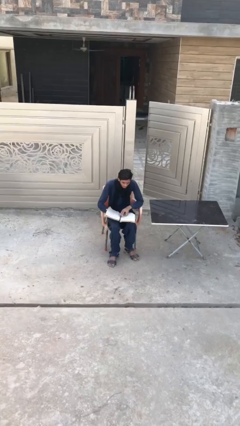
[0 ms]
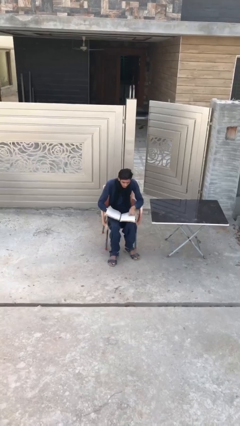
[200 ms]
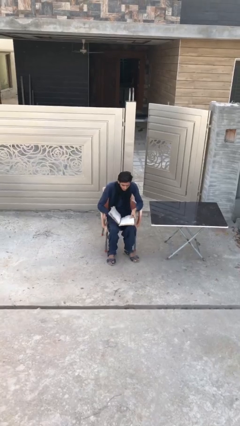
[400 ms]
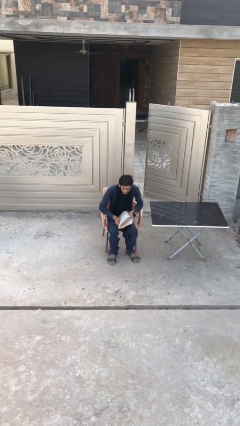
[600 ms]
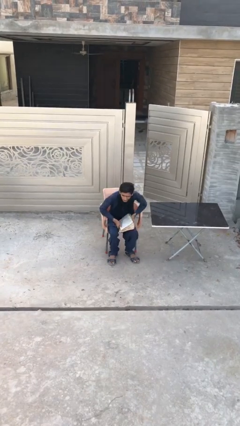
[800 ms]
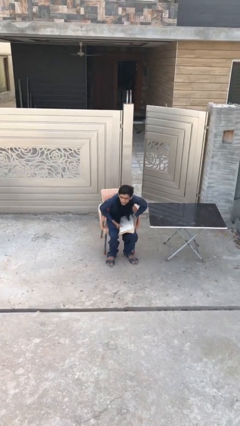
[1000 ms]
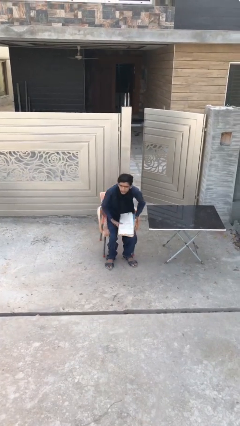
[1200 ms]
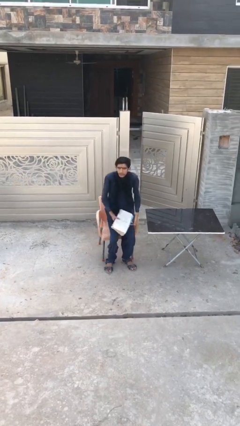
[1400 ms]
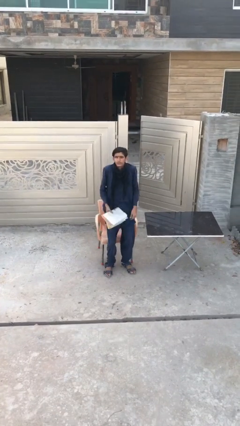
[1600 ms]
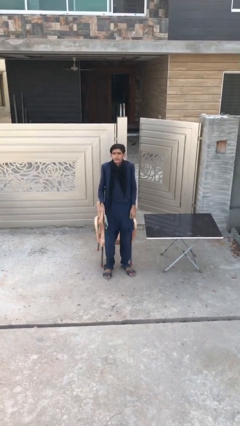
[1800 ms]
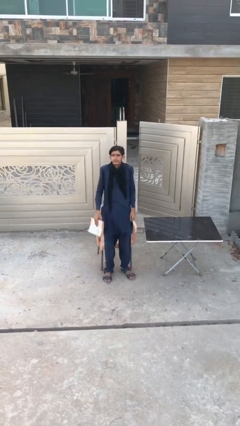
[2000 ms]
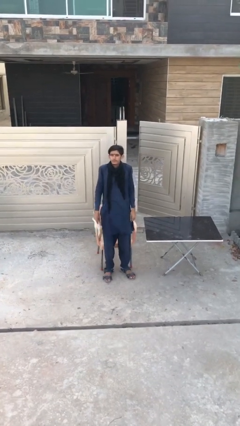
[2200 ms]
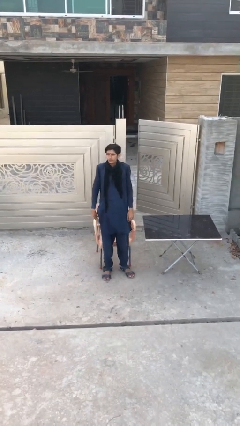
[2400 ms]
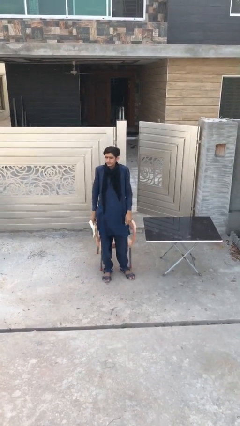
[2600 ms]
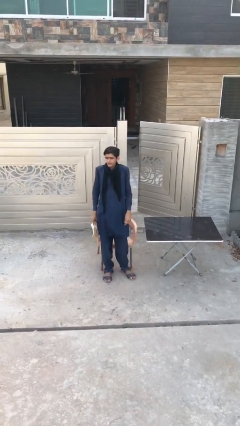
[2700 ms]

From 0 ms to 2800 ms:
person stands up

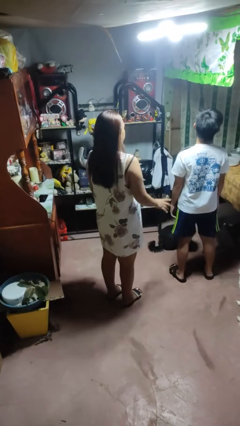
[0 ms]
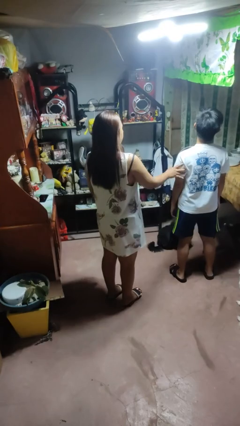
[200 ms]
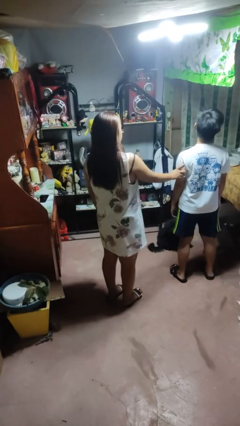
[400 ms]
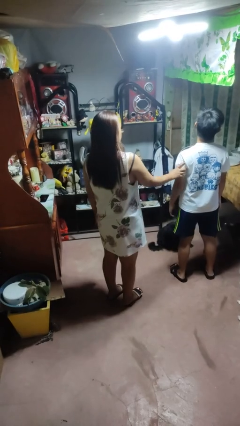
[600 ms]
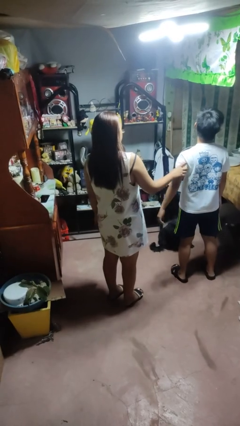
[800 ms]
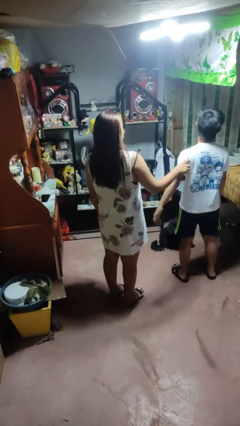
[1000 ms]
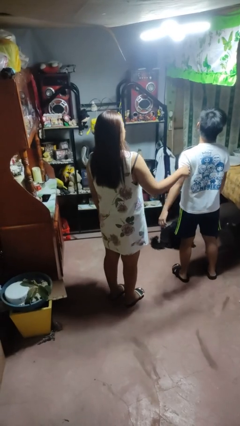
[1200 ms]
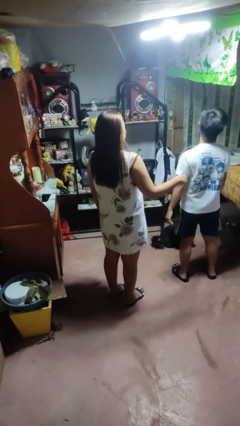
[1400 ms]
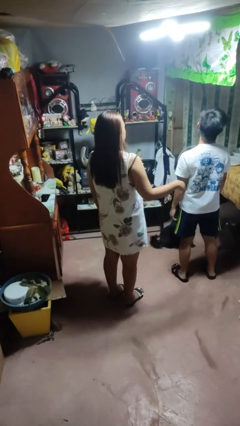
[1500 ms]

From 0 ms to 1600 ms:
person grabs person by bicep

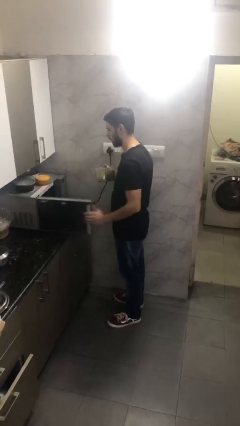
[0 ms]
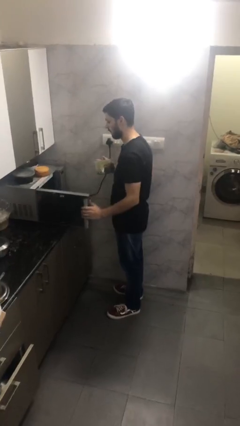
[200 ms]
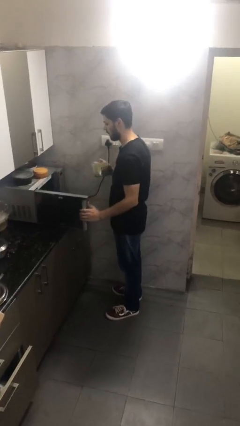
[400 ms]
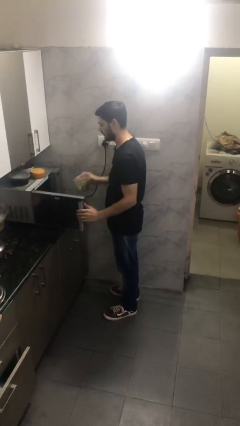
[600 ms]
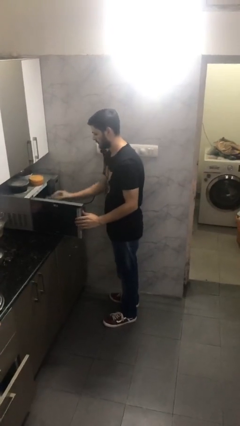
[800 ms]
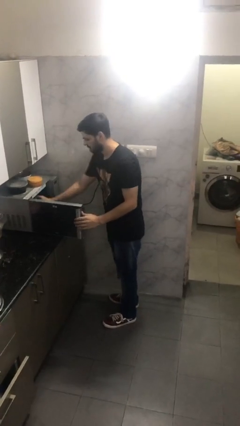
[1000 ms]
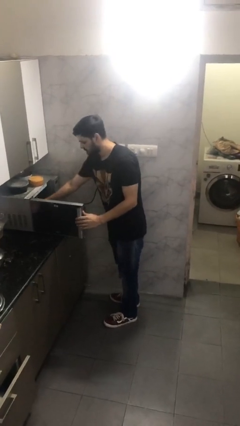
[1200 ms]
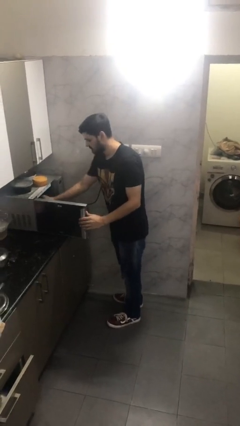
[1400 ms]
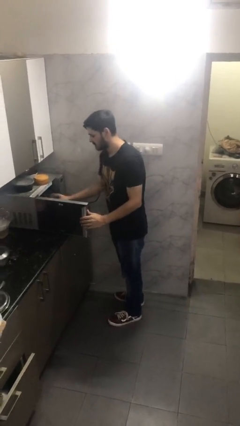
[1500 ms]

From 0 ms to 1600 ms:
person puts object into microwave

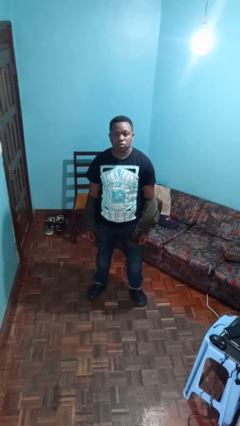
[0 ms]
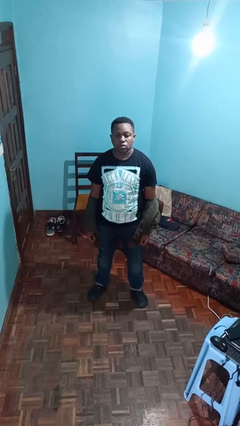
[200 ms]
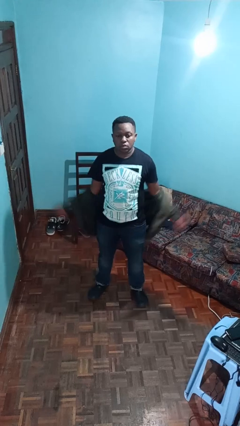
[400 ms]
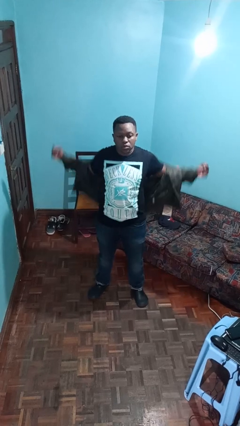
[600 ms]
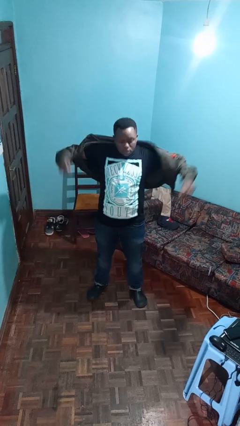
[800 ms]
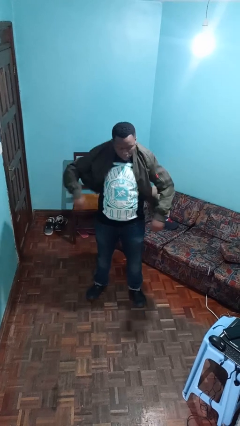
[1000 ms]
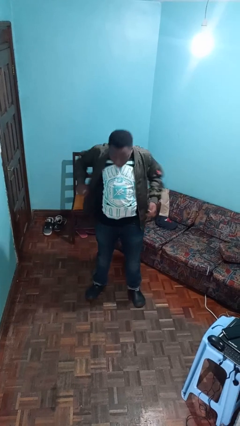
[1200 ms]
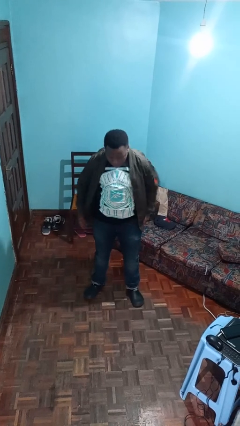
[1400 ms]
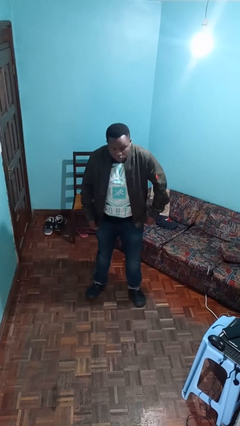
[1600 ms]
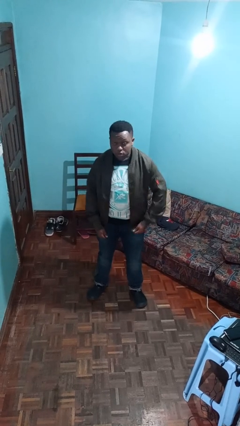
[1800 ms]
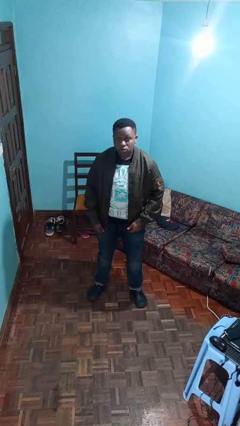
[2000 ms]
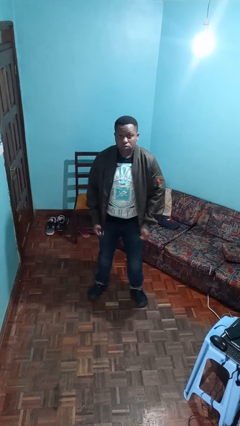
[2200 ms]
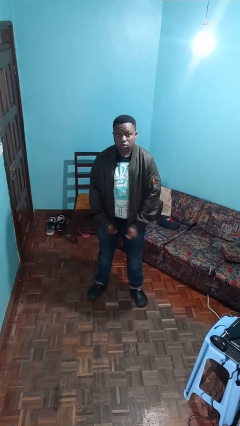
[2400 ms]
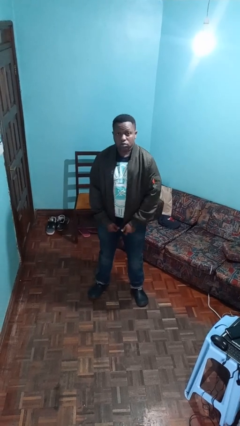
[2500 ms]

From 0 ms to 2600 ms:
person puts on jacket

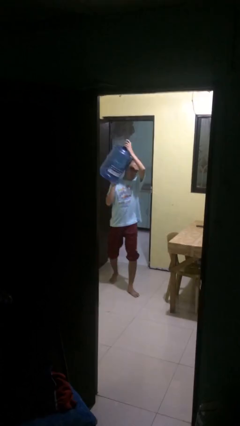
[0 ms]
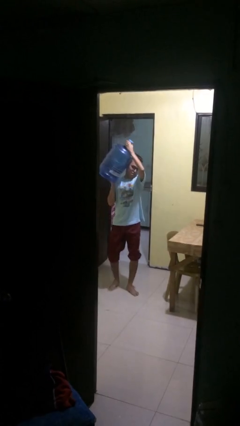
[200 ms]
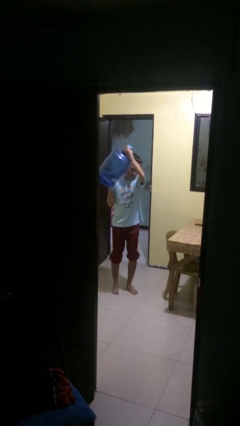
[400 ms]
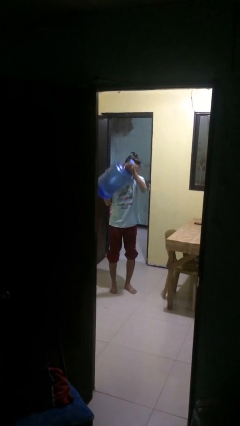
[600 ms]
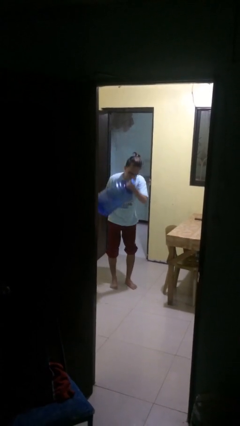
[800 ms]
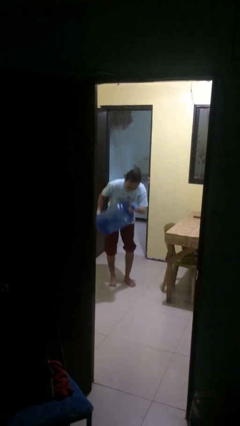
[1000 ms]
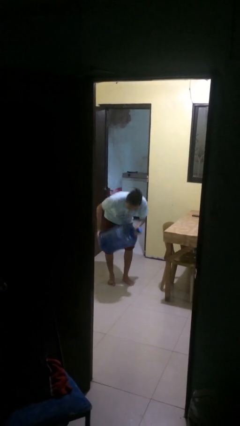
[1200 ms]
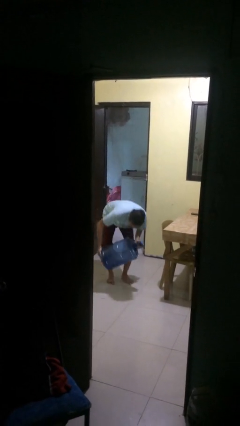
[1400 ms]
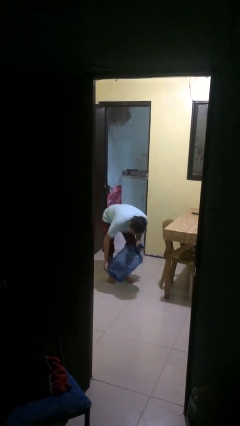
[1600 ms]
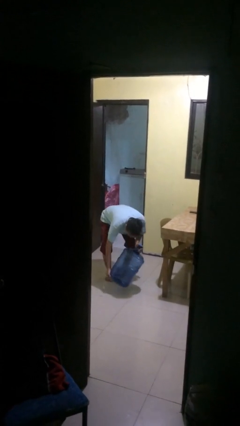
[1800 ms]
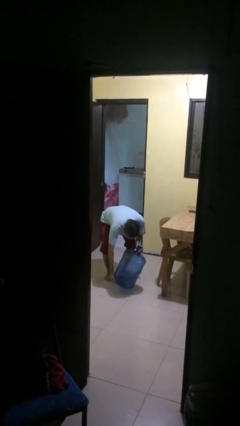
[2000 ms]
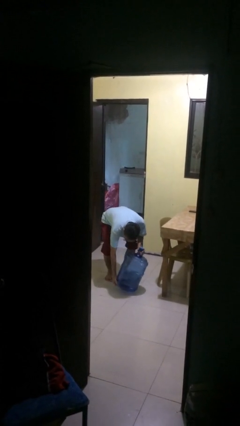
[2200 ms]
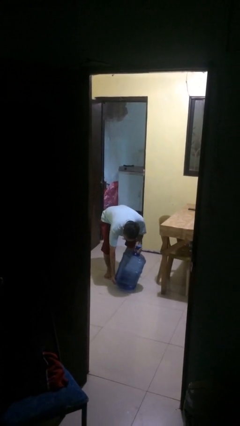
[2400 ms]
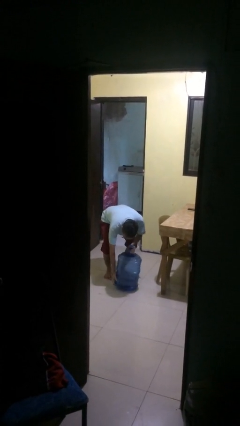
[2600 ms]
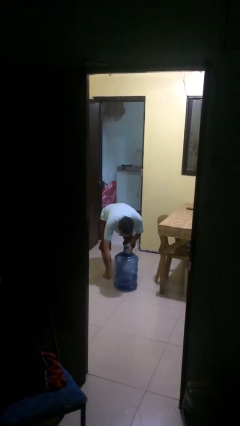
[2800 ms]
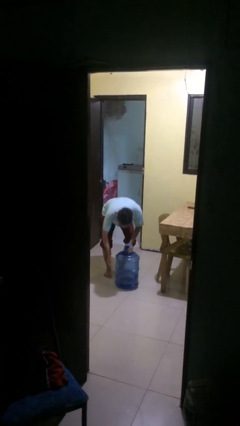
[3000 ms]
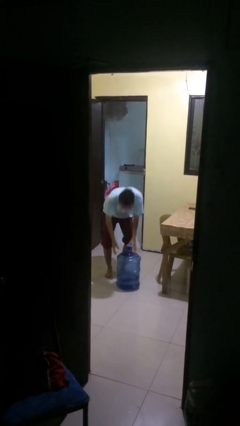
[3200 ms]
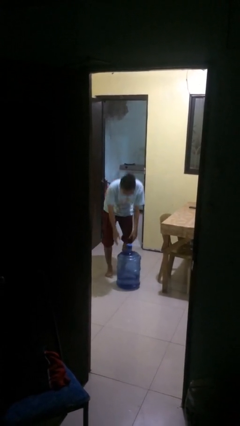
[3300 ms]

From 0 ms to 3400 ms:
person puts down object on floor

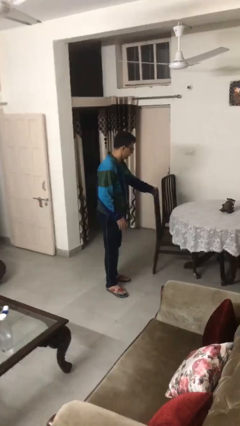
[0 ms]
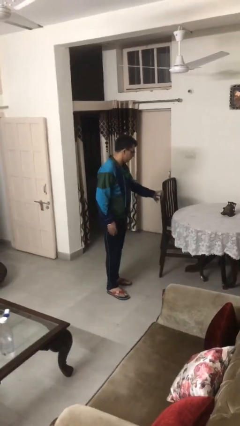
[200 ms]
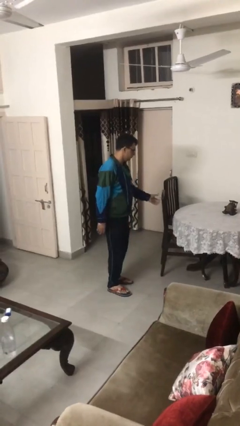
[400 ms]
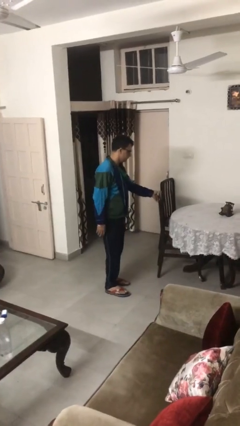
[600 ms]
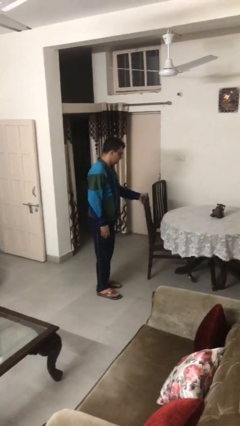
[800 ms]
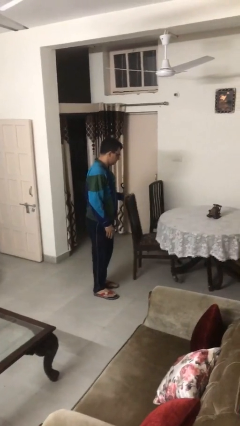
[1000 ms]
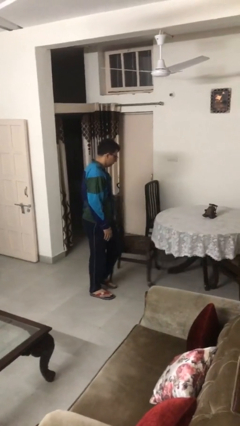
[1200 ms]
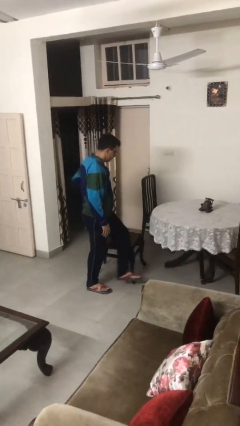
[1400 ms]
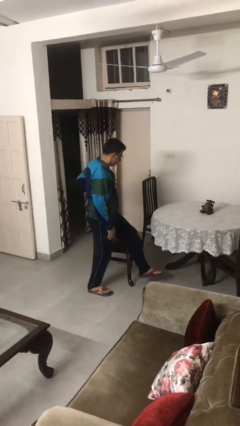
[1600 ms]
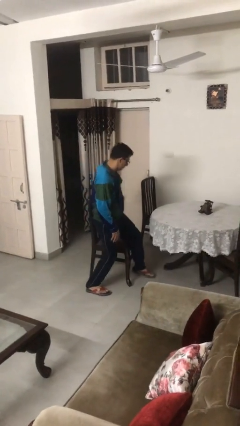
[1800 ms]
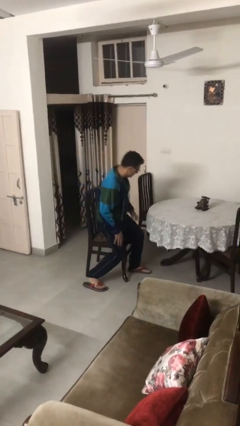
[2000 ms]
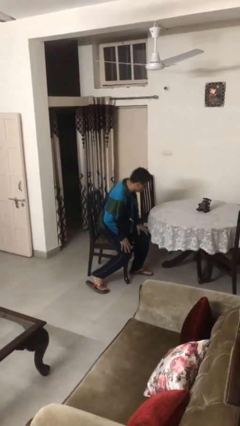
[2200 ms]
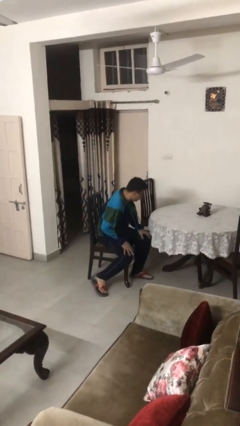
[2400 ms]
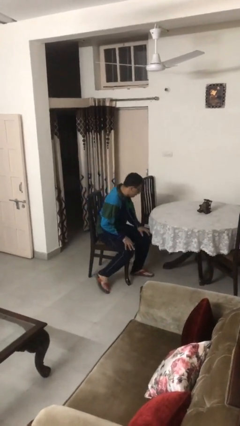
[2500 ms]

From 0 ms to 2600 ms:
person sits down

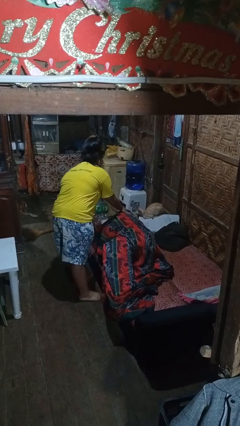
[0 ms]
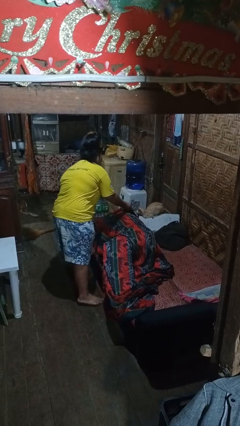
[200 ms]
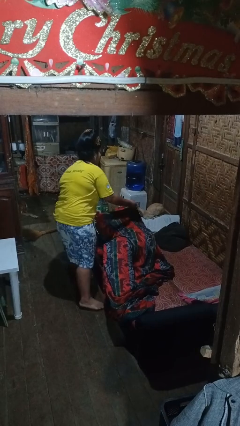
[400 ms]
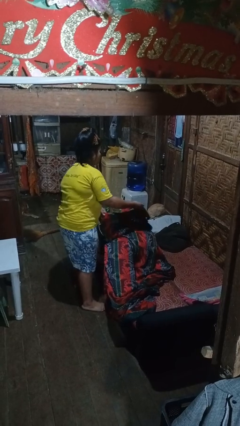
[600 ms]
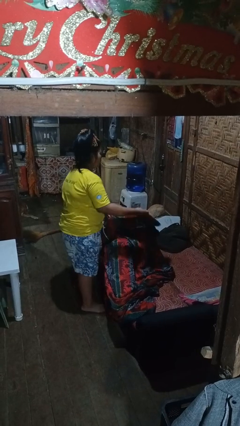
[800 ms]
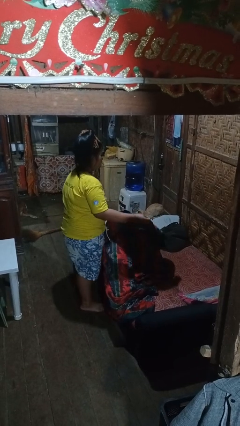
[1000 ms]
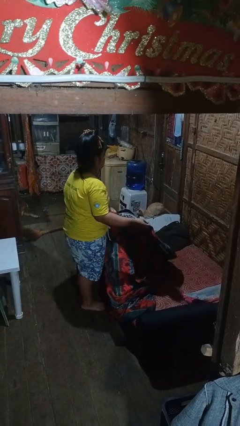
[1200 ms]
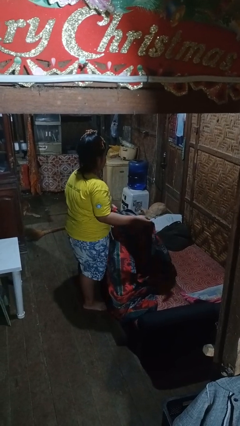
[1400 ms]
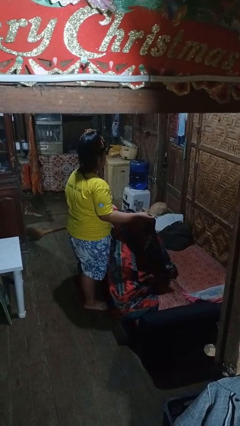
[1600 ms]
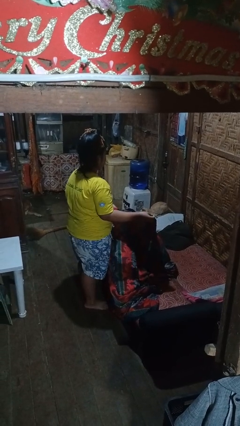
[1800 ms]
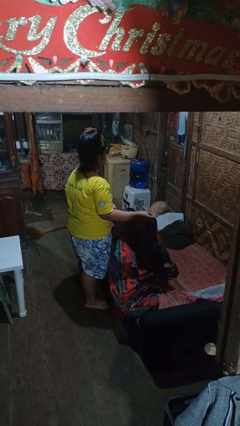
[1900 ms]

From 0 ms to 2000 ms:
person uncovers friend with blanket
